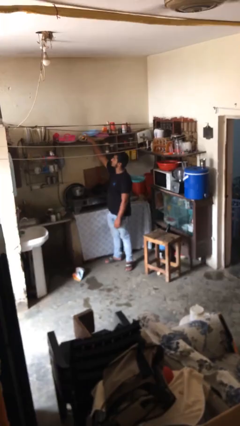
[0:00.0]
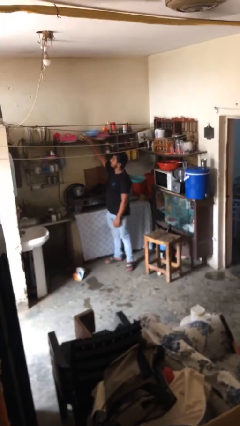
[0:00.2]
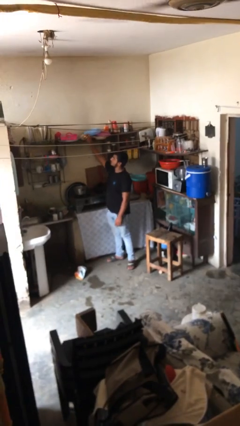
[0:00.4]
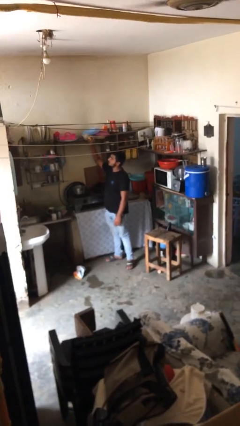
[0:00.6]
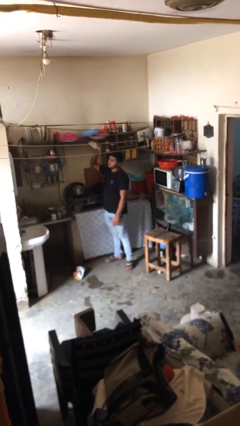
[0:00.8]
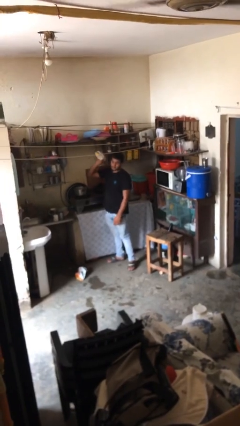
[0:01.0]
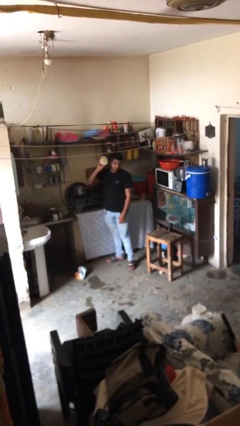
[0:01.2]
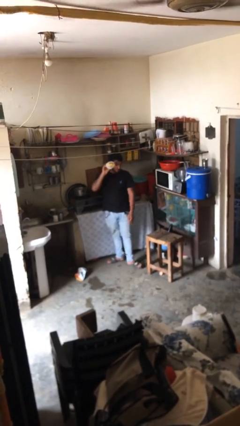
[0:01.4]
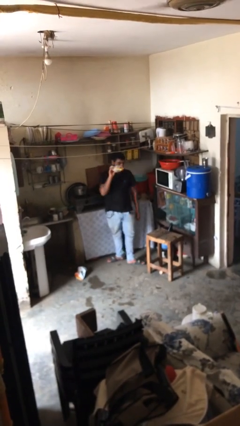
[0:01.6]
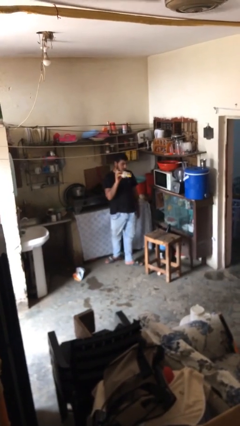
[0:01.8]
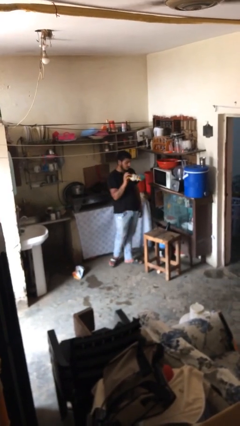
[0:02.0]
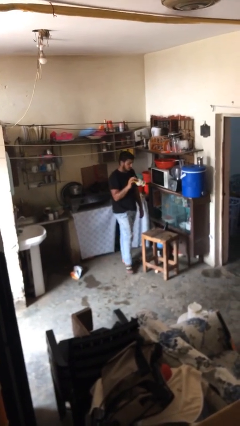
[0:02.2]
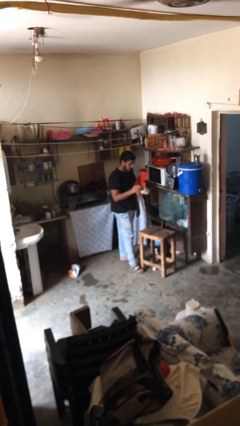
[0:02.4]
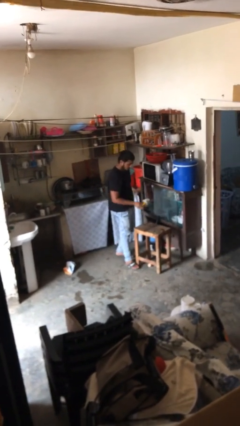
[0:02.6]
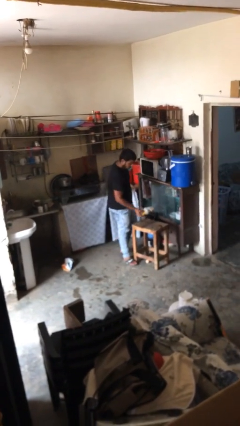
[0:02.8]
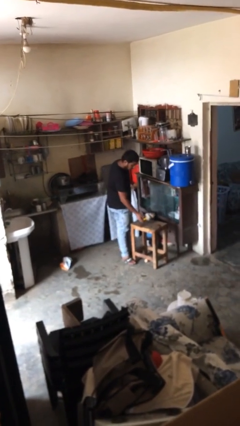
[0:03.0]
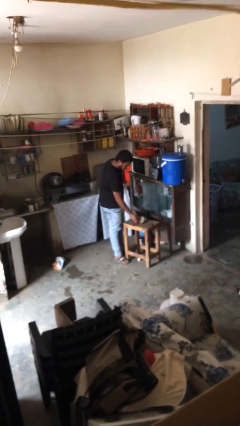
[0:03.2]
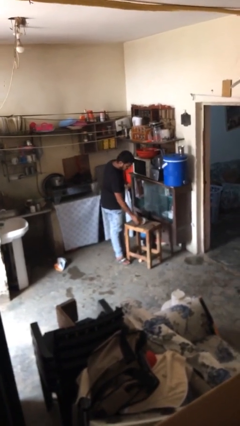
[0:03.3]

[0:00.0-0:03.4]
person picks up object from shelf

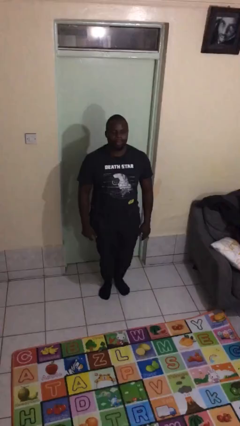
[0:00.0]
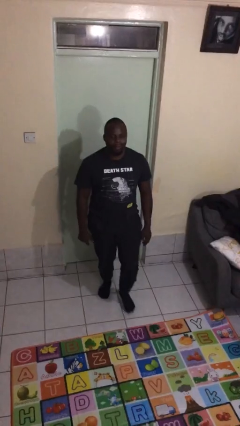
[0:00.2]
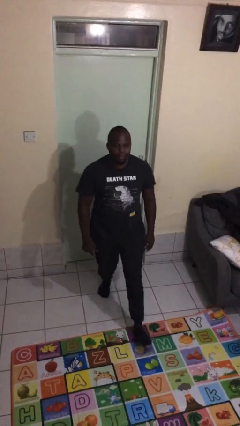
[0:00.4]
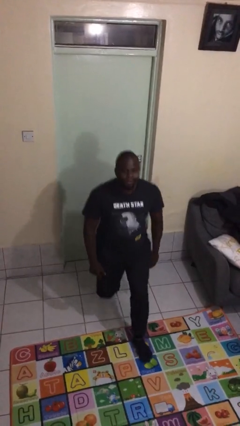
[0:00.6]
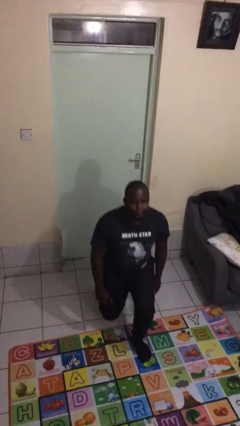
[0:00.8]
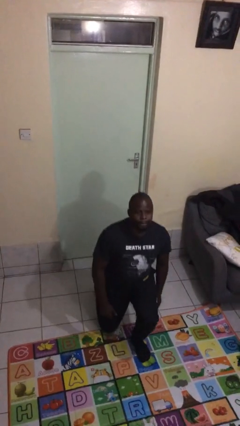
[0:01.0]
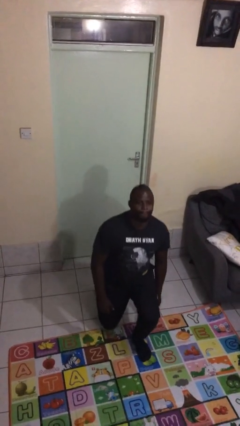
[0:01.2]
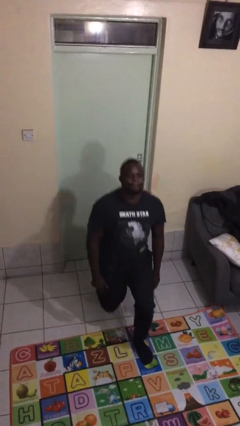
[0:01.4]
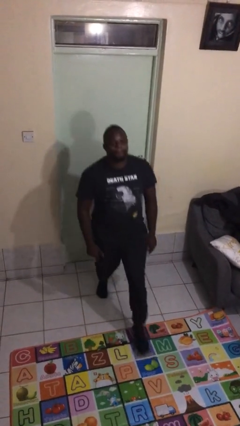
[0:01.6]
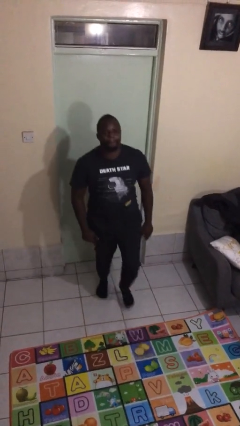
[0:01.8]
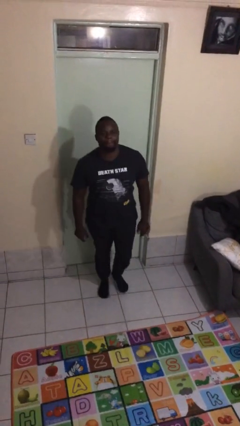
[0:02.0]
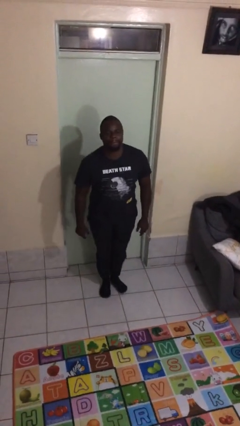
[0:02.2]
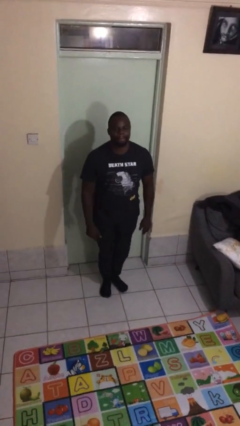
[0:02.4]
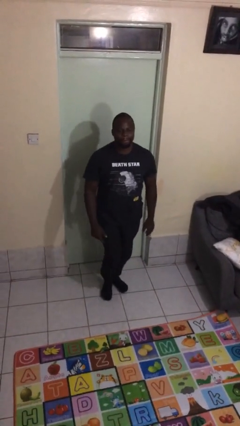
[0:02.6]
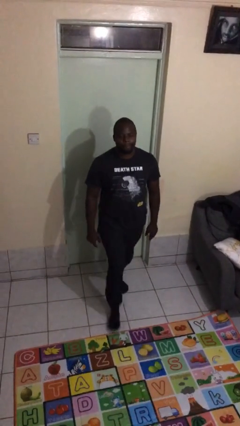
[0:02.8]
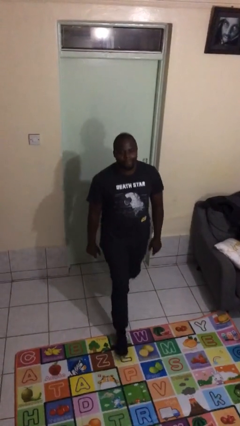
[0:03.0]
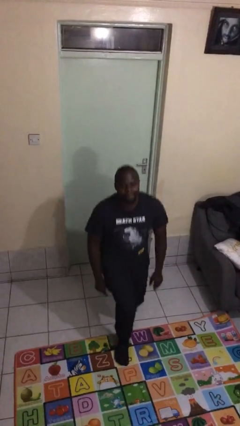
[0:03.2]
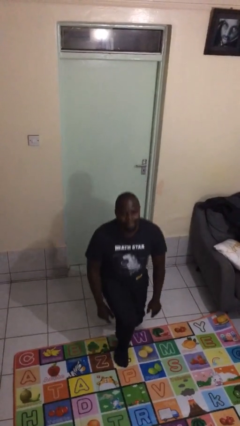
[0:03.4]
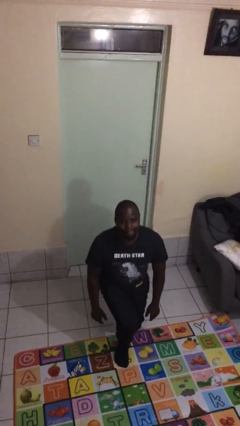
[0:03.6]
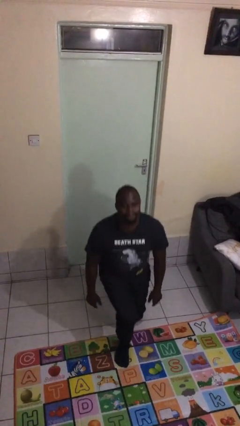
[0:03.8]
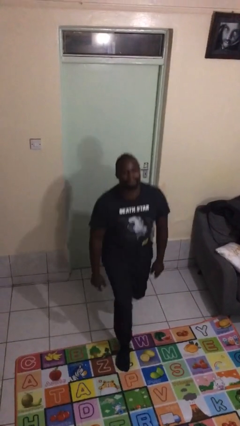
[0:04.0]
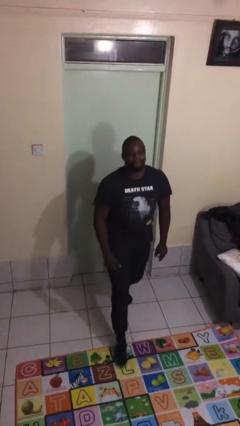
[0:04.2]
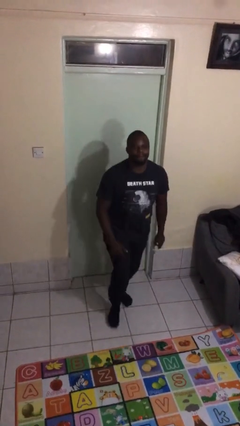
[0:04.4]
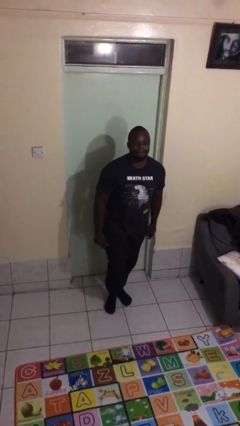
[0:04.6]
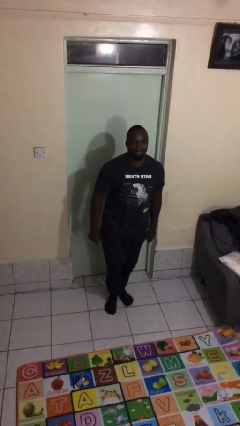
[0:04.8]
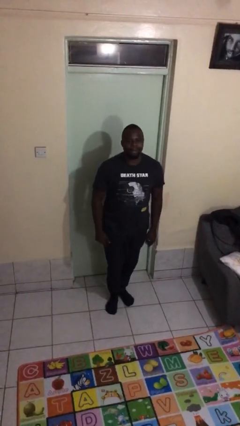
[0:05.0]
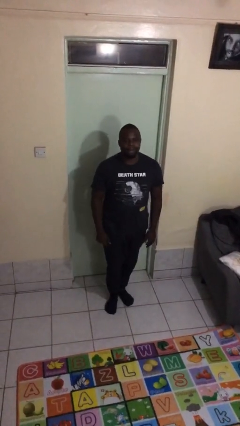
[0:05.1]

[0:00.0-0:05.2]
person exercises with lunges

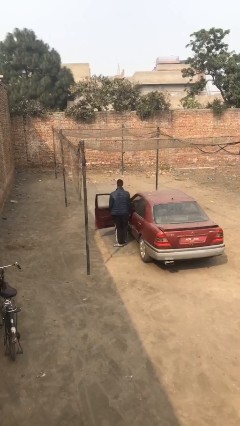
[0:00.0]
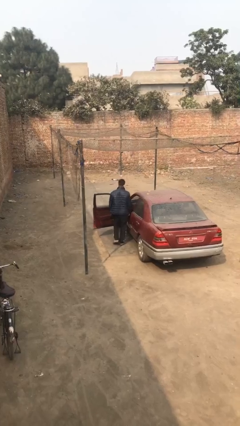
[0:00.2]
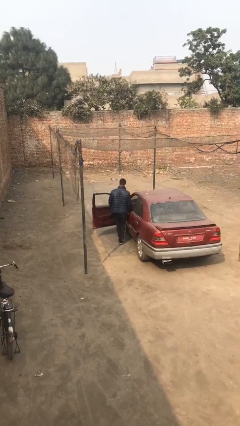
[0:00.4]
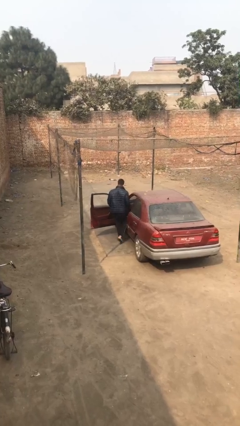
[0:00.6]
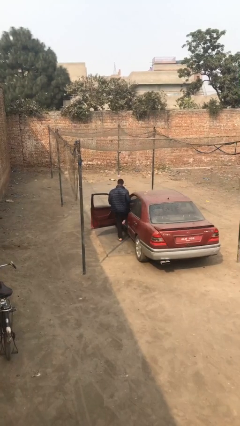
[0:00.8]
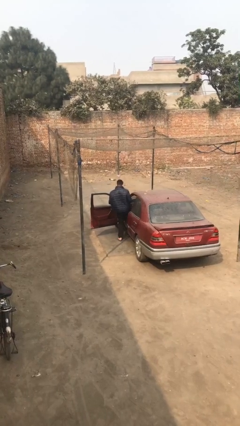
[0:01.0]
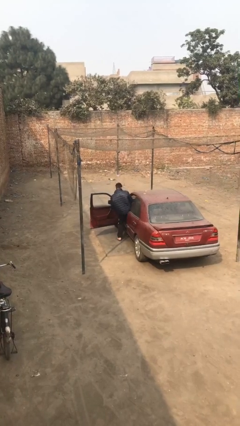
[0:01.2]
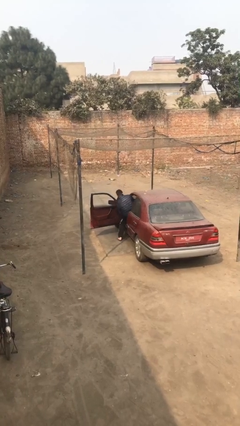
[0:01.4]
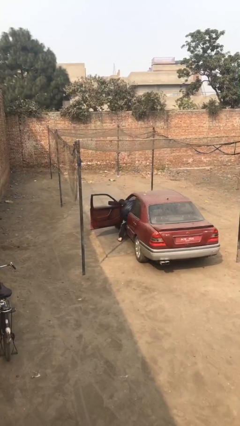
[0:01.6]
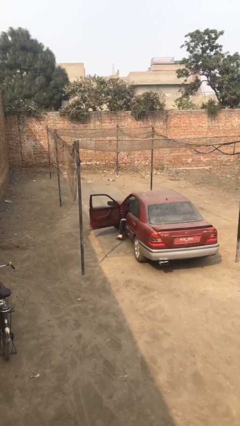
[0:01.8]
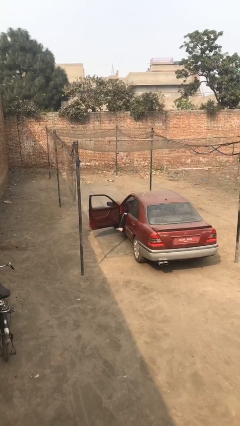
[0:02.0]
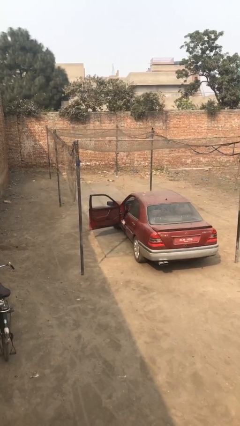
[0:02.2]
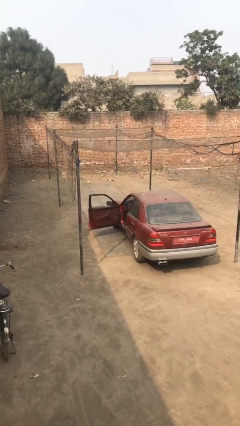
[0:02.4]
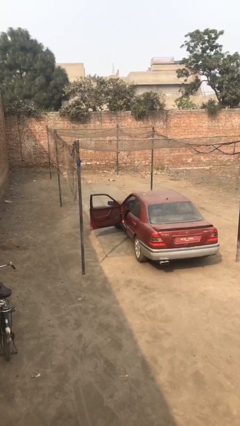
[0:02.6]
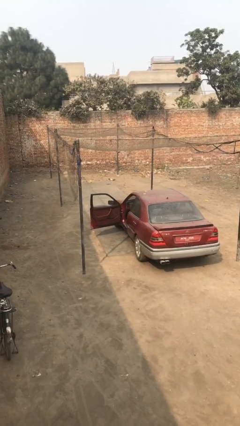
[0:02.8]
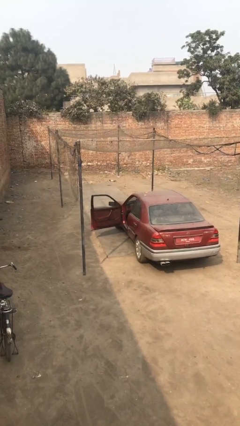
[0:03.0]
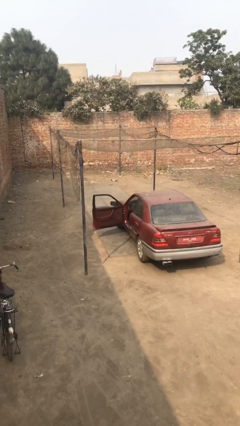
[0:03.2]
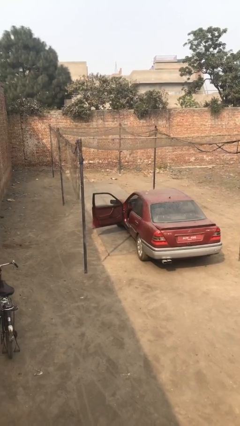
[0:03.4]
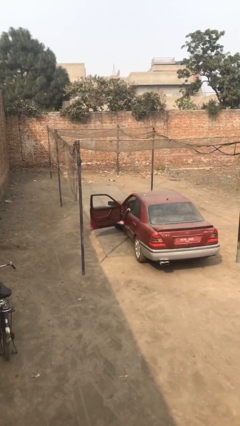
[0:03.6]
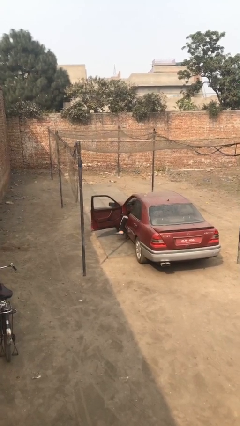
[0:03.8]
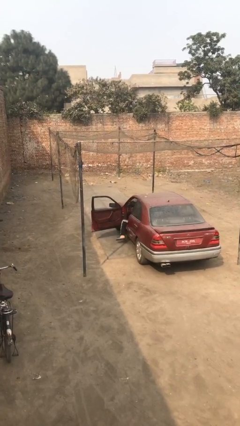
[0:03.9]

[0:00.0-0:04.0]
person enters car

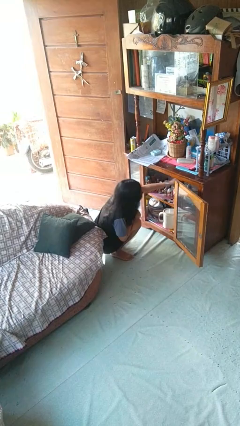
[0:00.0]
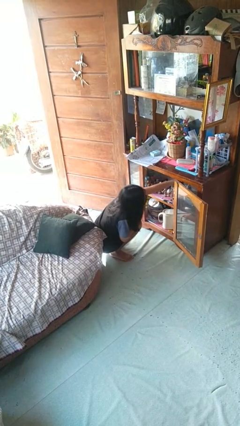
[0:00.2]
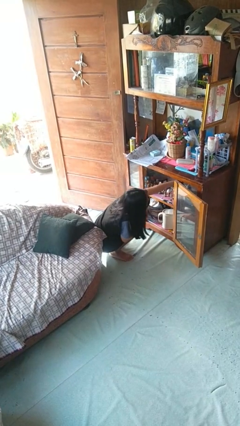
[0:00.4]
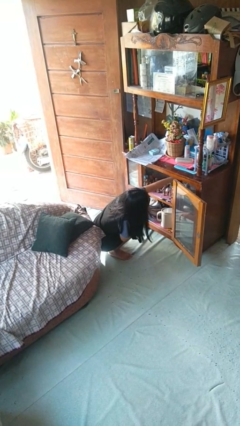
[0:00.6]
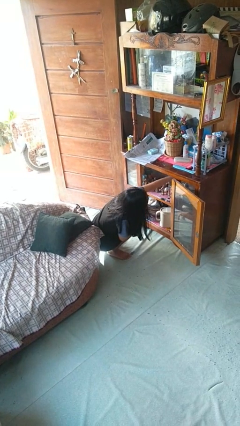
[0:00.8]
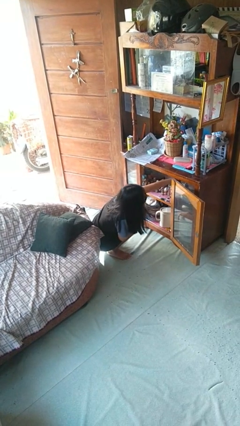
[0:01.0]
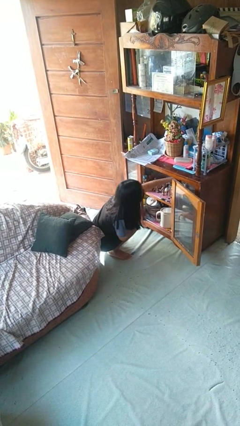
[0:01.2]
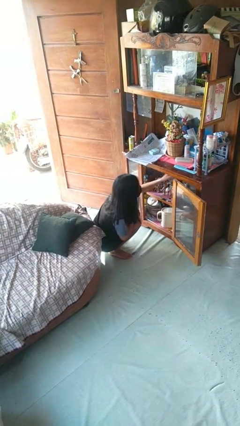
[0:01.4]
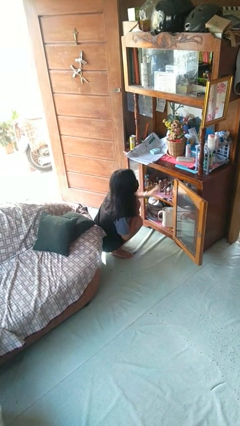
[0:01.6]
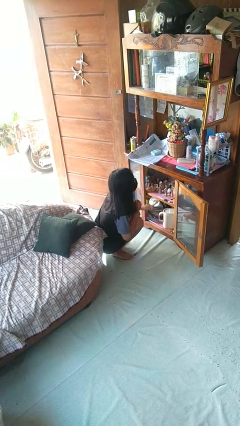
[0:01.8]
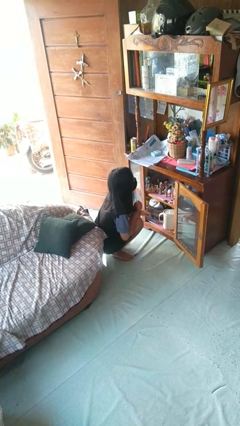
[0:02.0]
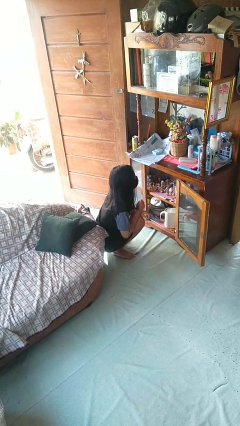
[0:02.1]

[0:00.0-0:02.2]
person searches in cabinet

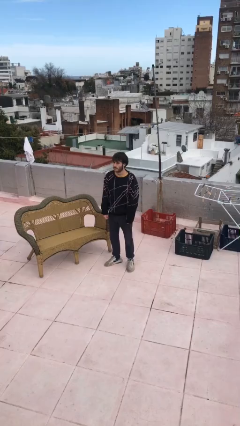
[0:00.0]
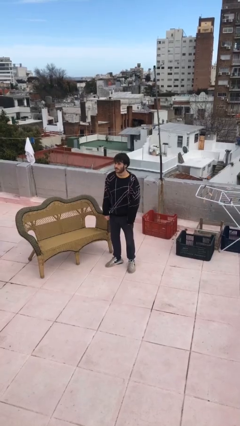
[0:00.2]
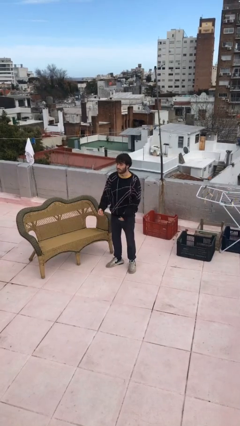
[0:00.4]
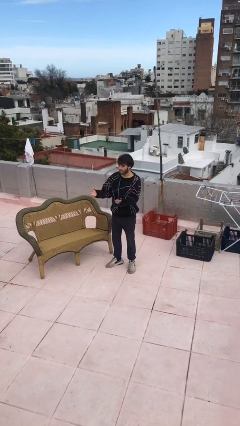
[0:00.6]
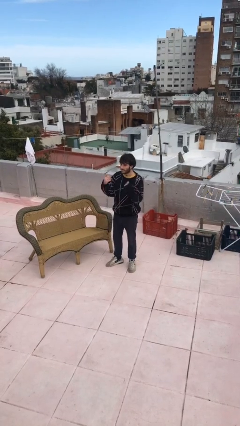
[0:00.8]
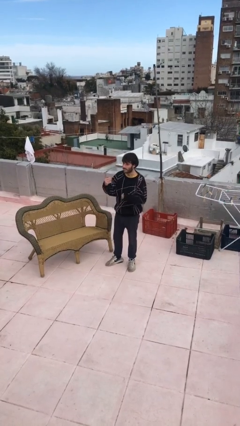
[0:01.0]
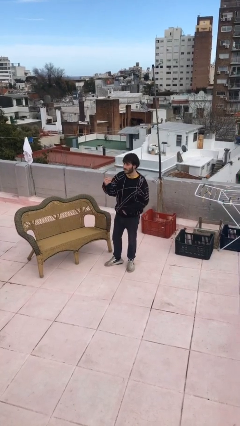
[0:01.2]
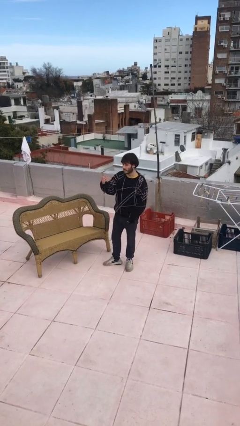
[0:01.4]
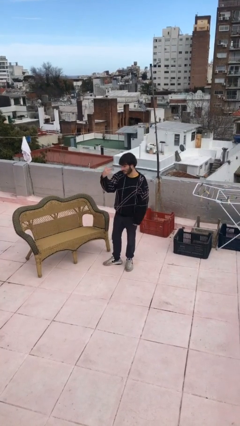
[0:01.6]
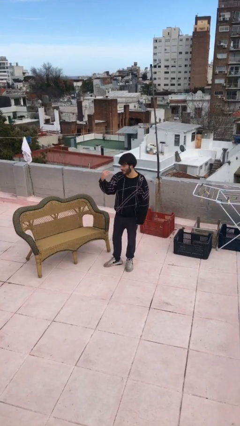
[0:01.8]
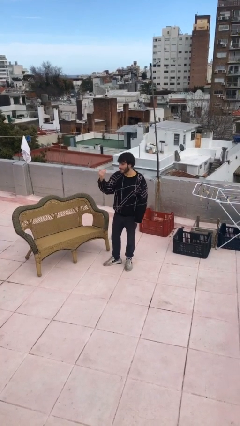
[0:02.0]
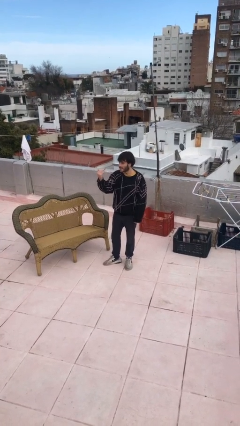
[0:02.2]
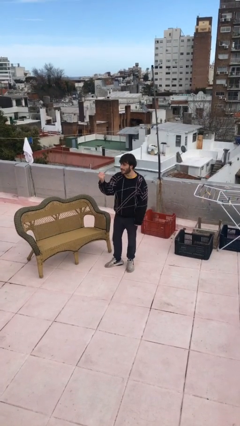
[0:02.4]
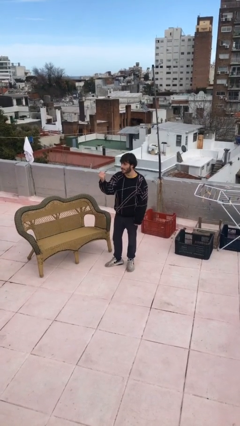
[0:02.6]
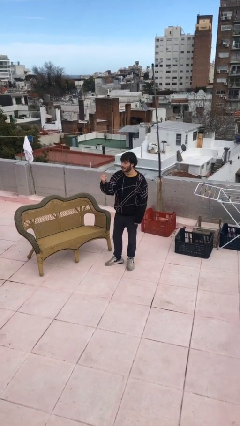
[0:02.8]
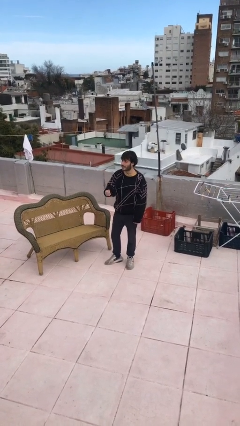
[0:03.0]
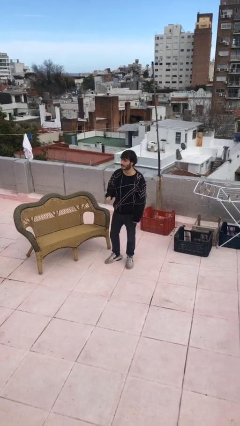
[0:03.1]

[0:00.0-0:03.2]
person gestures come here
